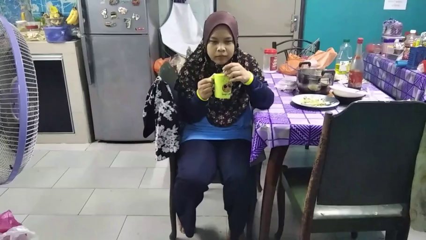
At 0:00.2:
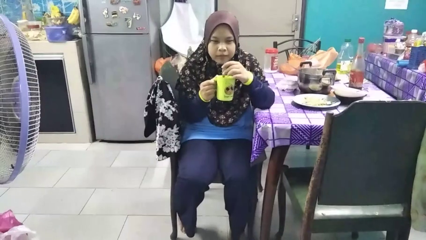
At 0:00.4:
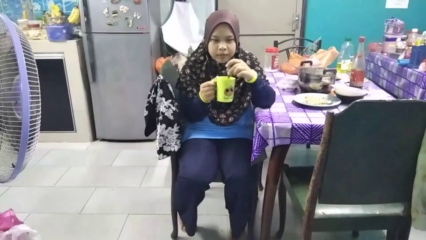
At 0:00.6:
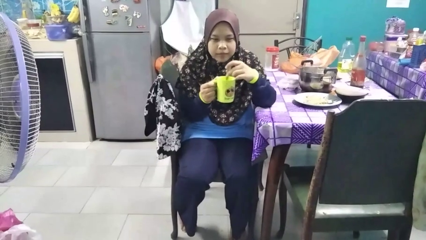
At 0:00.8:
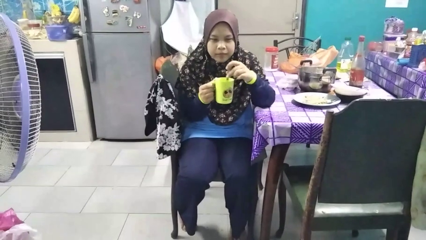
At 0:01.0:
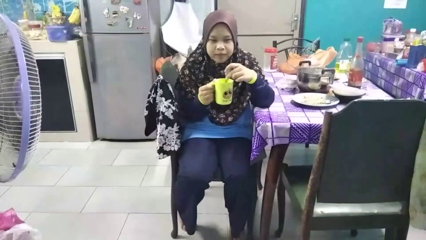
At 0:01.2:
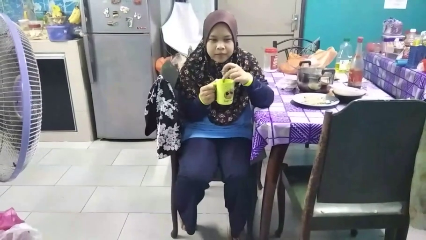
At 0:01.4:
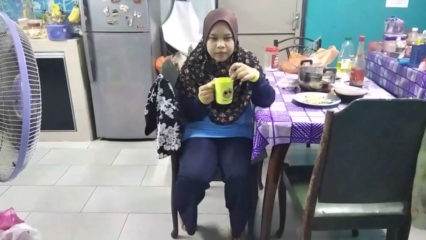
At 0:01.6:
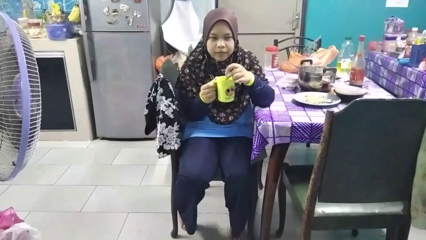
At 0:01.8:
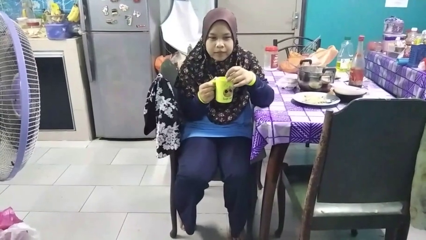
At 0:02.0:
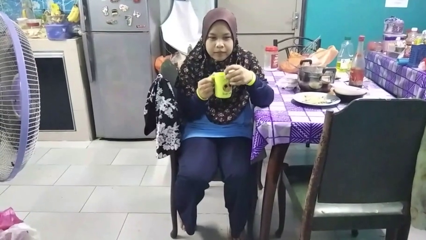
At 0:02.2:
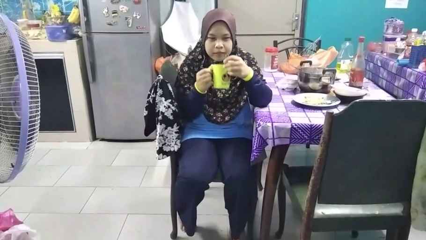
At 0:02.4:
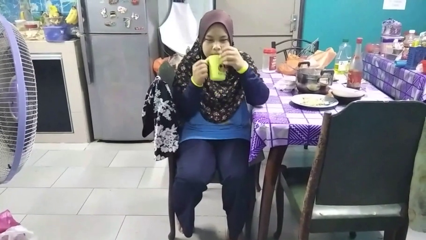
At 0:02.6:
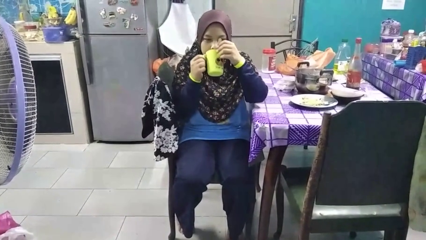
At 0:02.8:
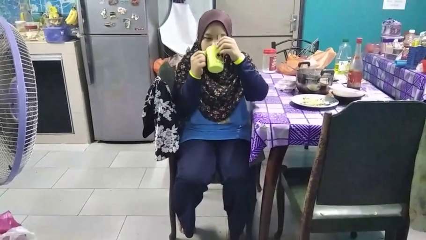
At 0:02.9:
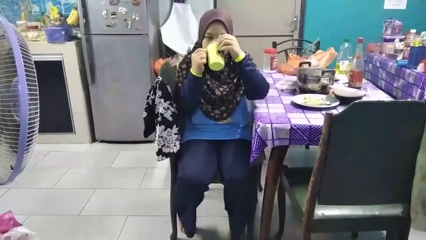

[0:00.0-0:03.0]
person stirs mug

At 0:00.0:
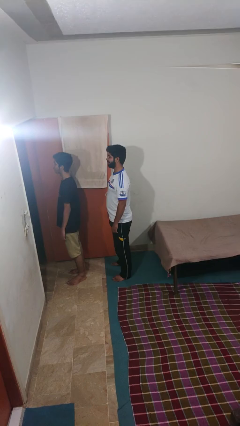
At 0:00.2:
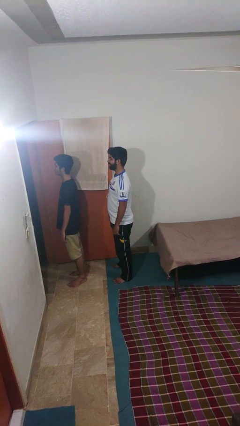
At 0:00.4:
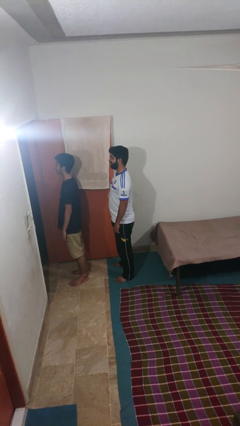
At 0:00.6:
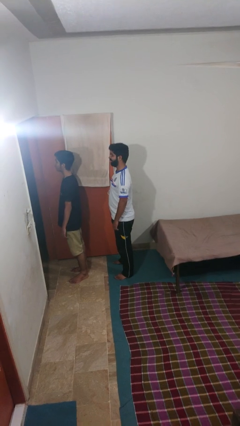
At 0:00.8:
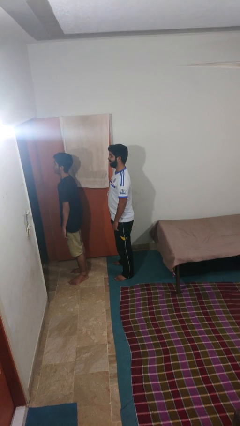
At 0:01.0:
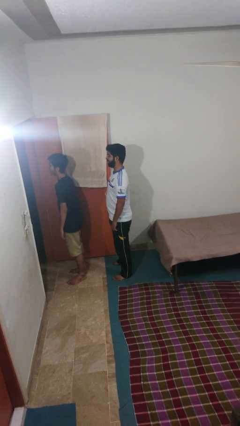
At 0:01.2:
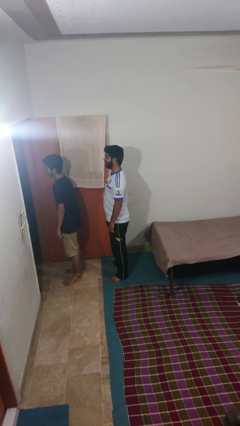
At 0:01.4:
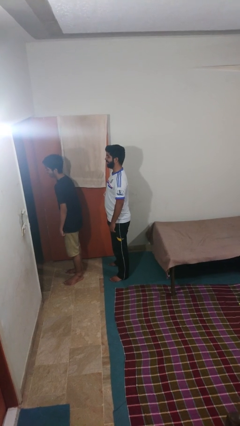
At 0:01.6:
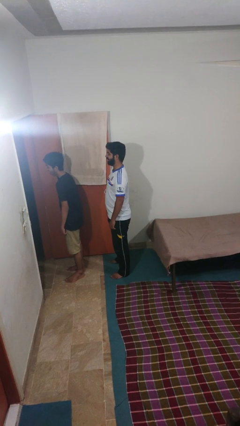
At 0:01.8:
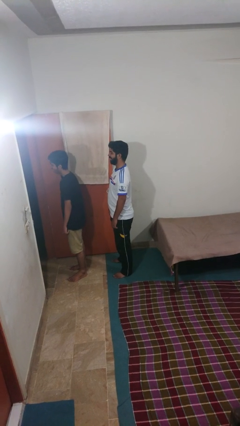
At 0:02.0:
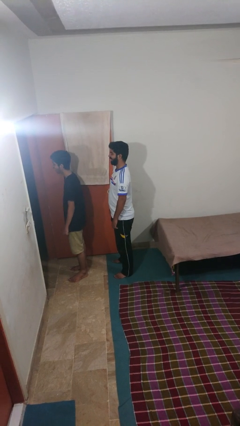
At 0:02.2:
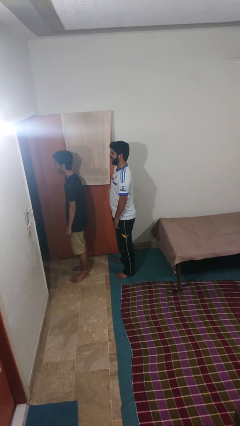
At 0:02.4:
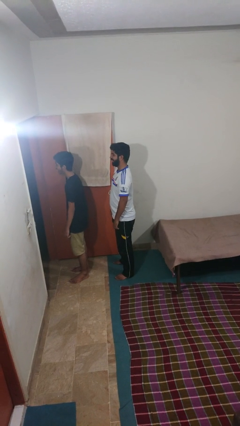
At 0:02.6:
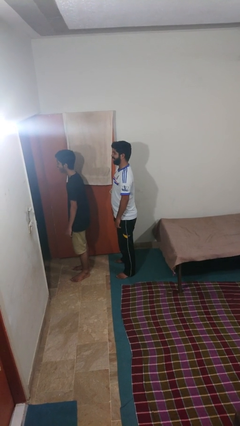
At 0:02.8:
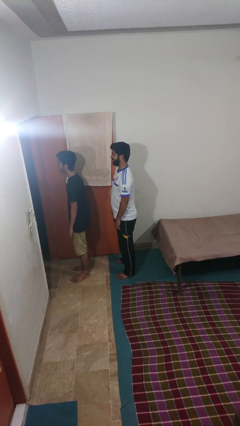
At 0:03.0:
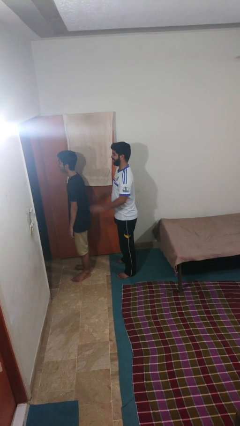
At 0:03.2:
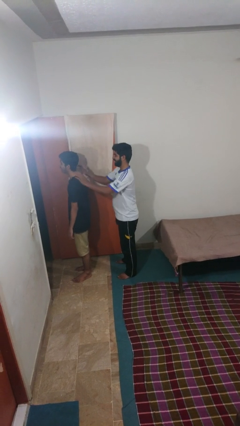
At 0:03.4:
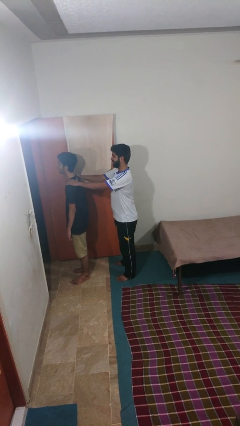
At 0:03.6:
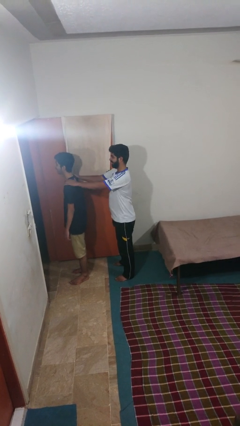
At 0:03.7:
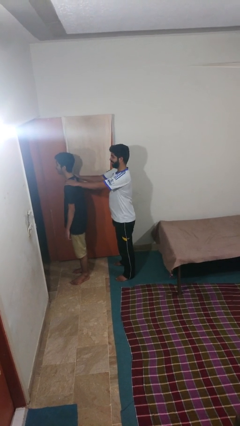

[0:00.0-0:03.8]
person grabs person by shoulder

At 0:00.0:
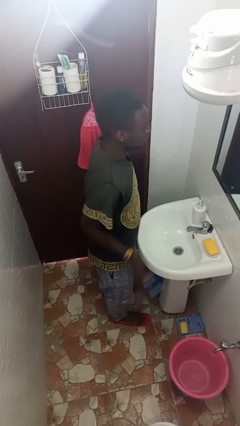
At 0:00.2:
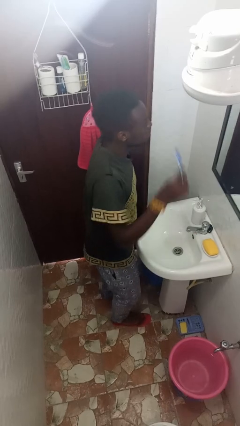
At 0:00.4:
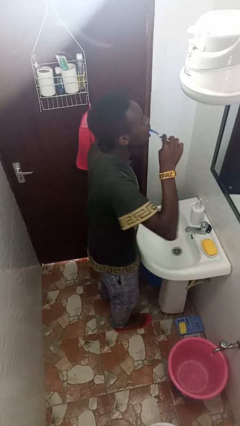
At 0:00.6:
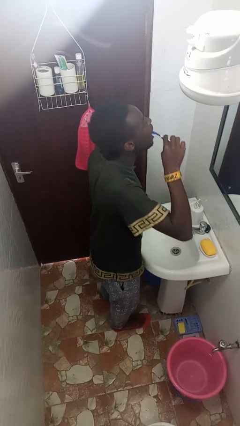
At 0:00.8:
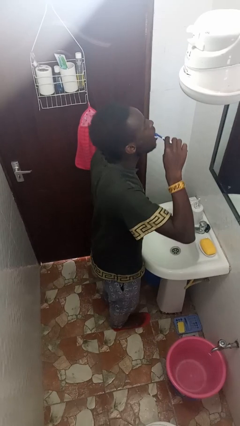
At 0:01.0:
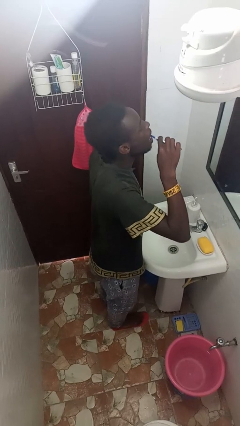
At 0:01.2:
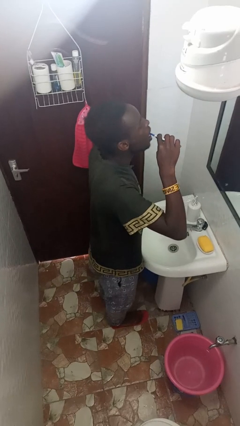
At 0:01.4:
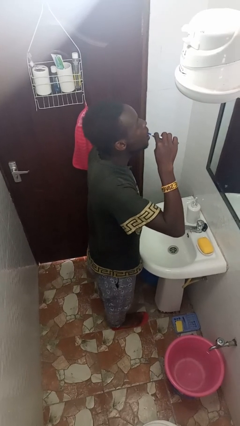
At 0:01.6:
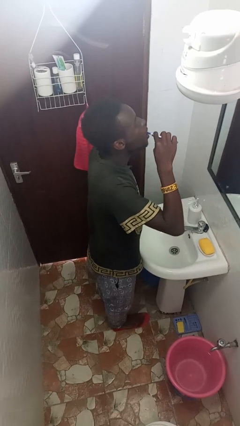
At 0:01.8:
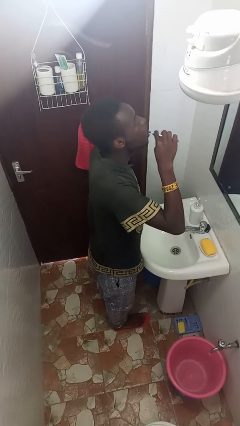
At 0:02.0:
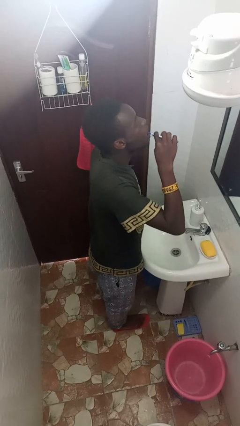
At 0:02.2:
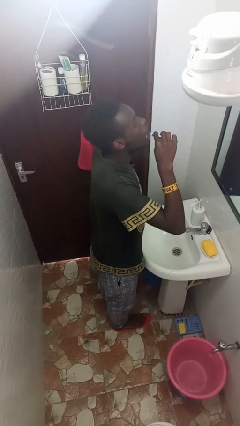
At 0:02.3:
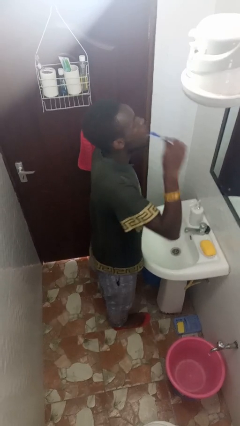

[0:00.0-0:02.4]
person brushes teeth

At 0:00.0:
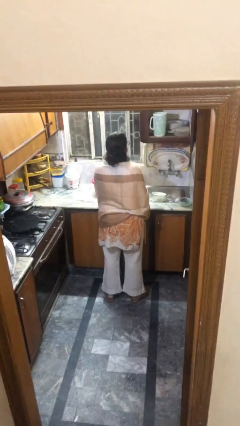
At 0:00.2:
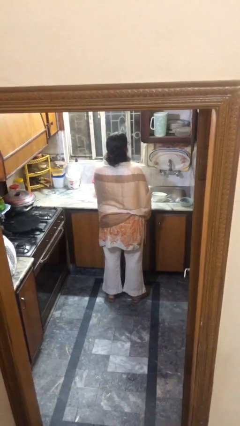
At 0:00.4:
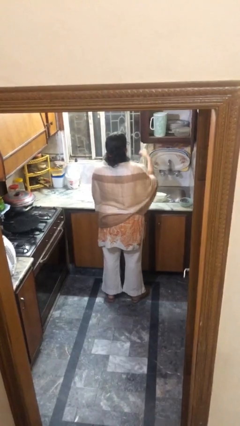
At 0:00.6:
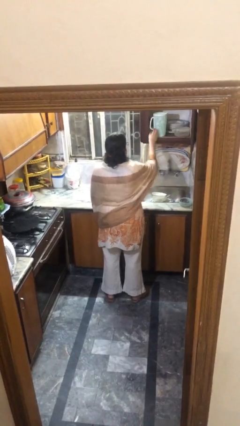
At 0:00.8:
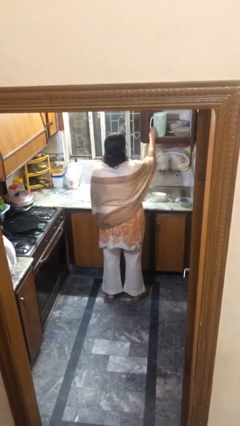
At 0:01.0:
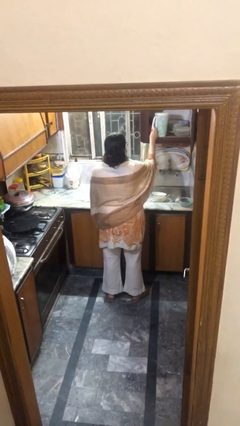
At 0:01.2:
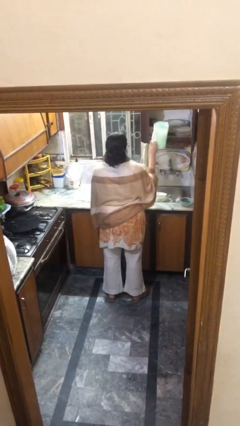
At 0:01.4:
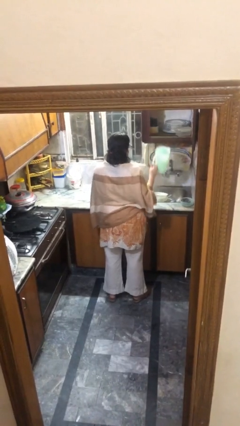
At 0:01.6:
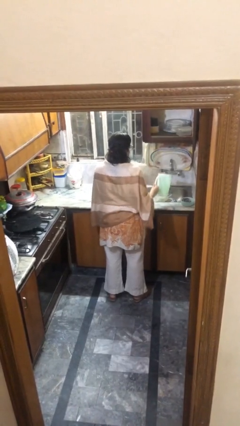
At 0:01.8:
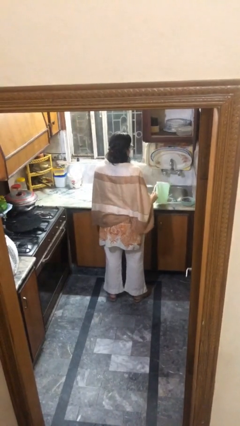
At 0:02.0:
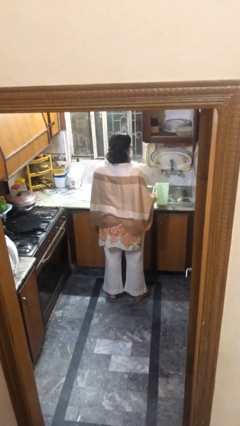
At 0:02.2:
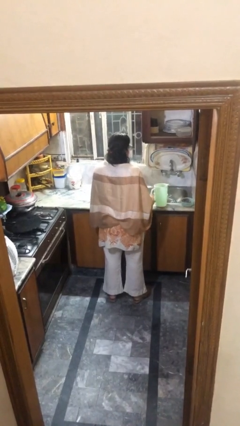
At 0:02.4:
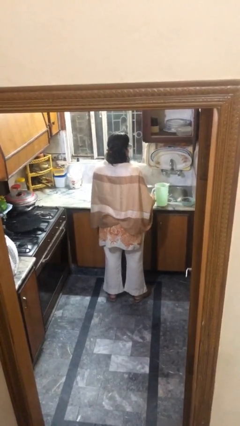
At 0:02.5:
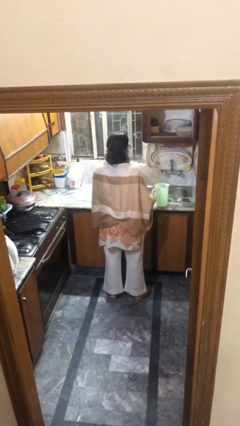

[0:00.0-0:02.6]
person takes object from kitchen drawer

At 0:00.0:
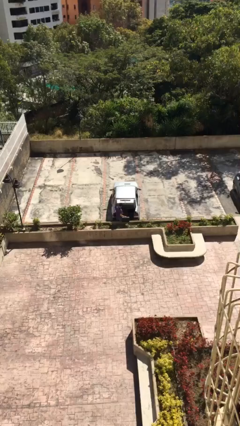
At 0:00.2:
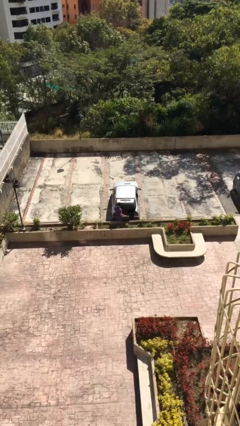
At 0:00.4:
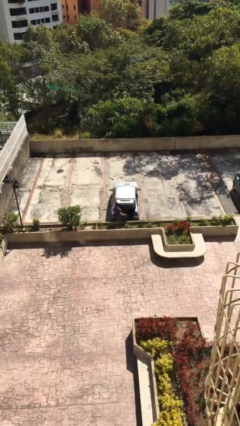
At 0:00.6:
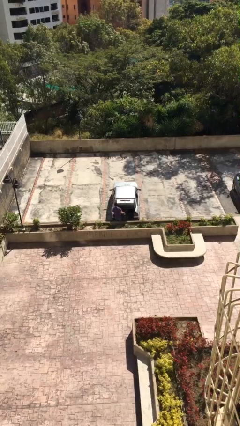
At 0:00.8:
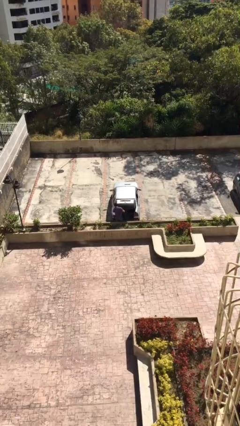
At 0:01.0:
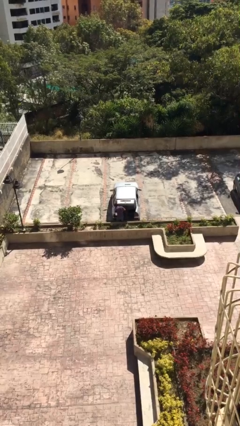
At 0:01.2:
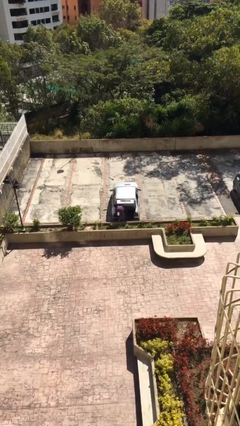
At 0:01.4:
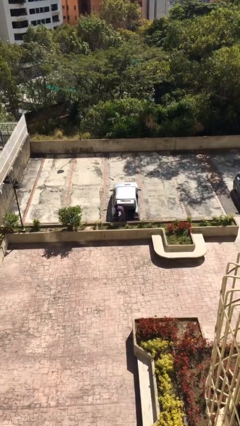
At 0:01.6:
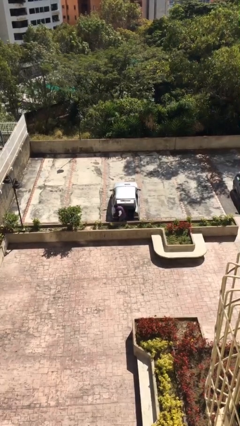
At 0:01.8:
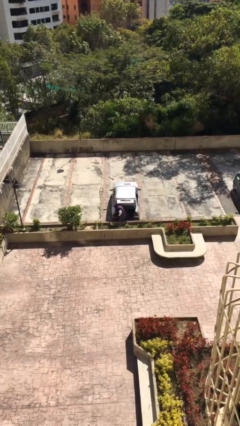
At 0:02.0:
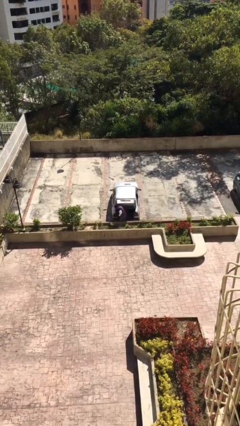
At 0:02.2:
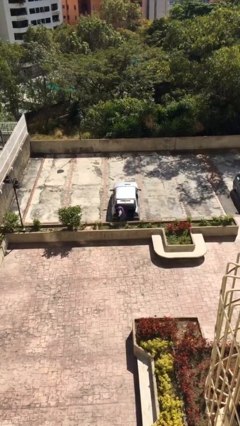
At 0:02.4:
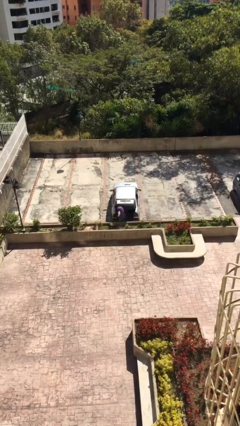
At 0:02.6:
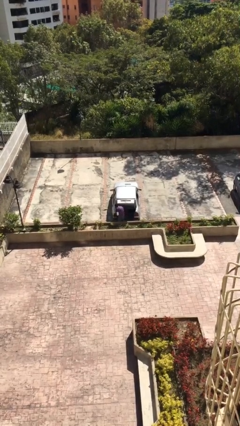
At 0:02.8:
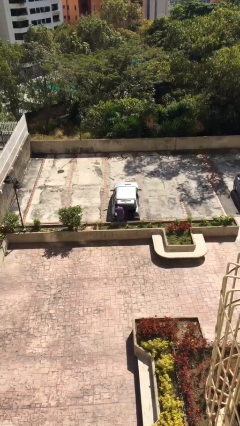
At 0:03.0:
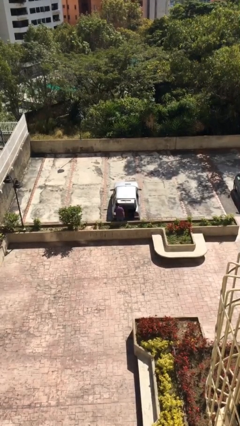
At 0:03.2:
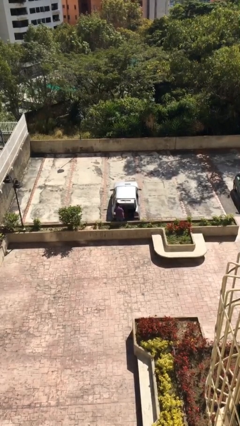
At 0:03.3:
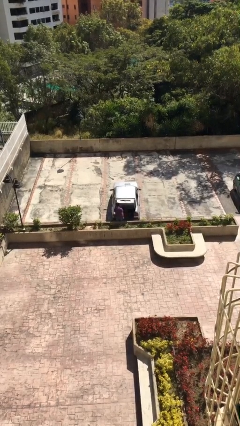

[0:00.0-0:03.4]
person loads car

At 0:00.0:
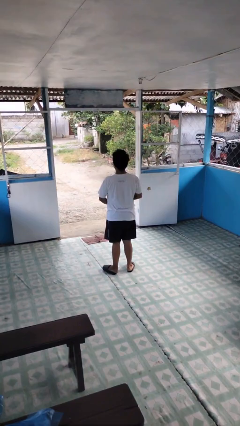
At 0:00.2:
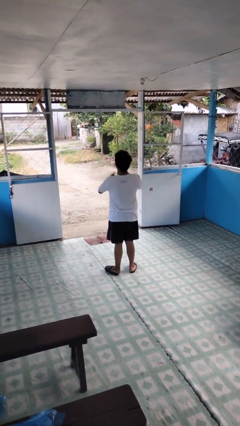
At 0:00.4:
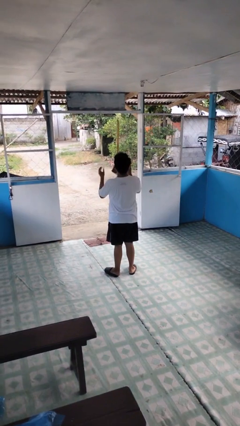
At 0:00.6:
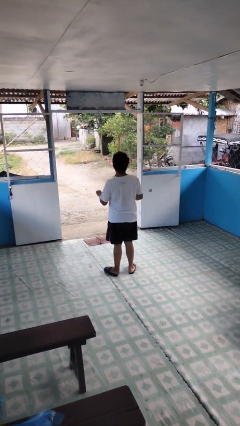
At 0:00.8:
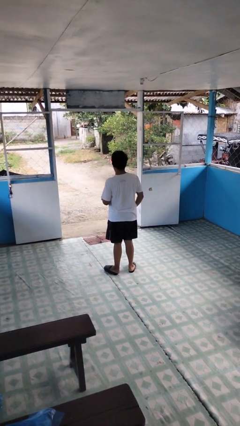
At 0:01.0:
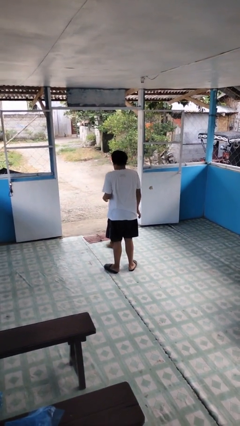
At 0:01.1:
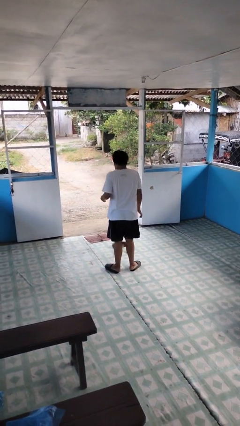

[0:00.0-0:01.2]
person throws object into air

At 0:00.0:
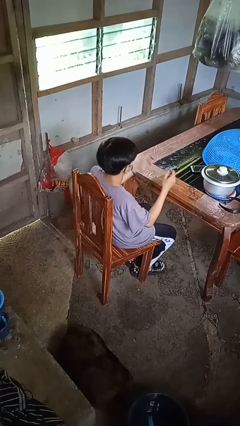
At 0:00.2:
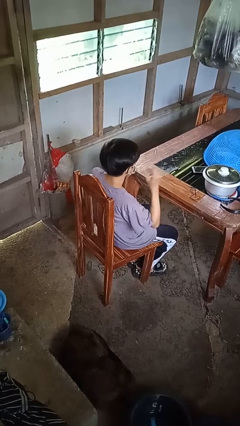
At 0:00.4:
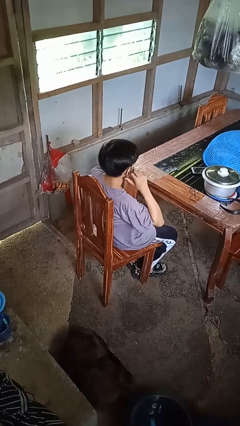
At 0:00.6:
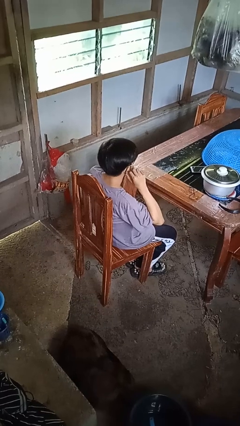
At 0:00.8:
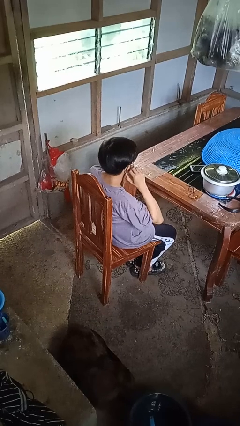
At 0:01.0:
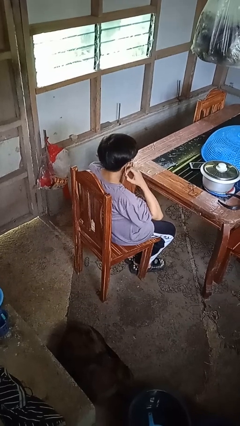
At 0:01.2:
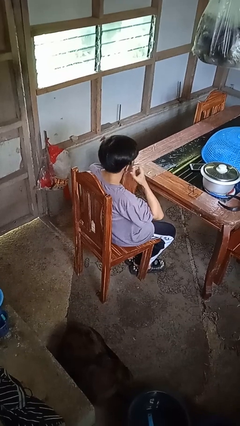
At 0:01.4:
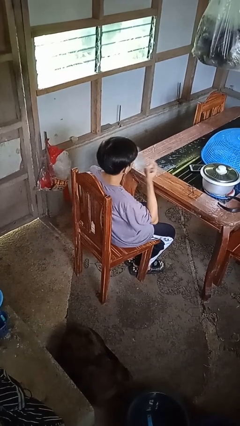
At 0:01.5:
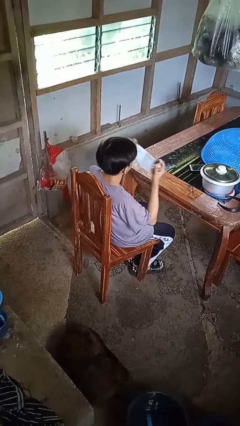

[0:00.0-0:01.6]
person takes off facemask
